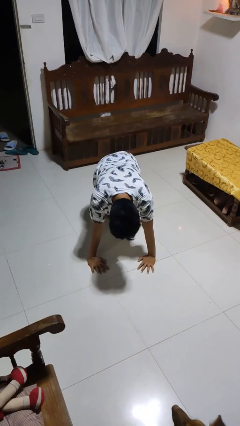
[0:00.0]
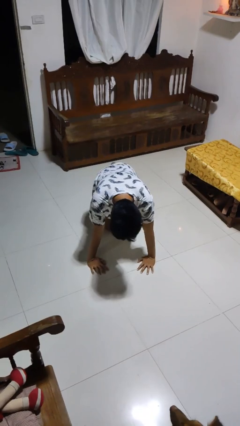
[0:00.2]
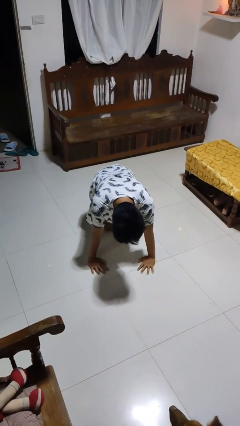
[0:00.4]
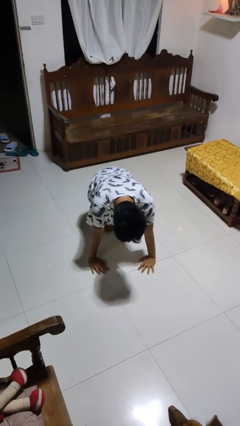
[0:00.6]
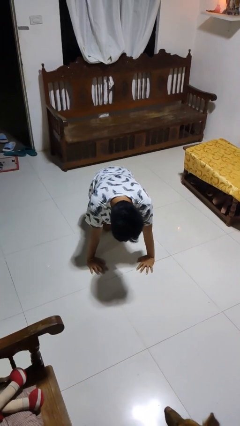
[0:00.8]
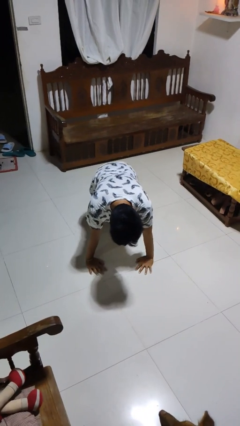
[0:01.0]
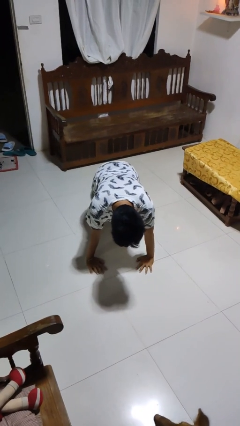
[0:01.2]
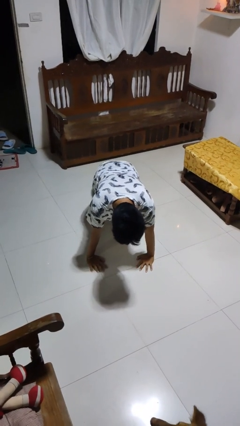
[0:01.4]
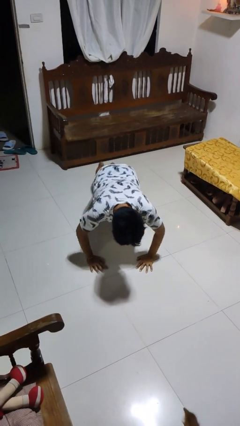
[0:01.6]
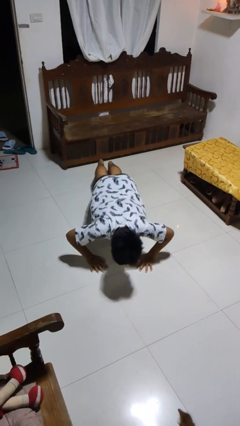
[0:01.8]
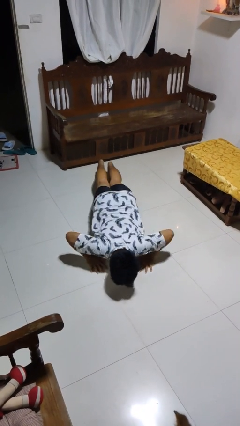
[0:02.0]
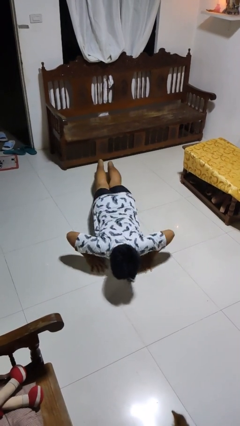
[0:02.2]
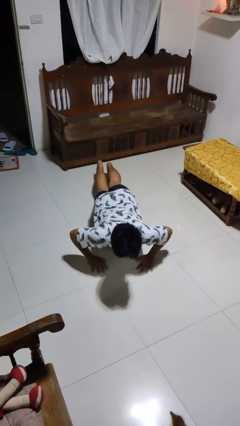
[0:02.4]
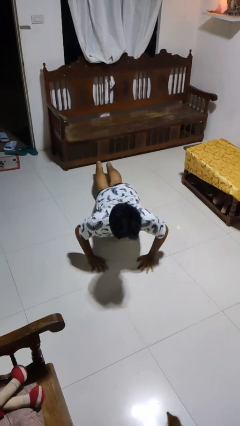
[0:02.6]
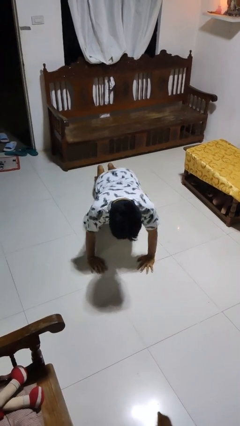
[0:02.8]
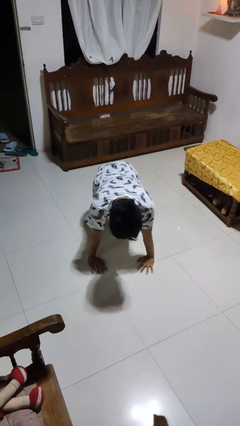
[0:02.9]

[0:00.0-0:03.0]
person exercises with pushup

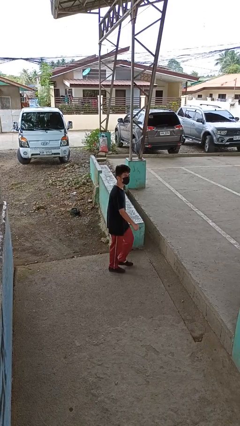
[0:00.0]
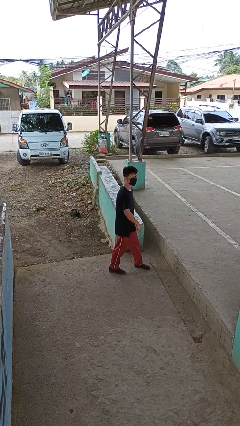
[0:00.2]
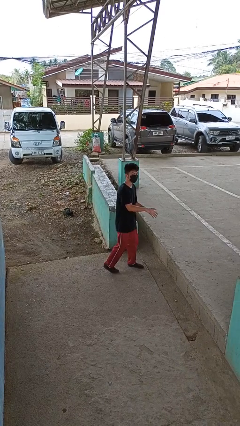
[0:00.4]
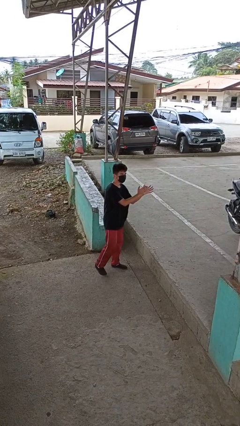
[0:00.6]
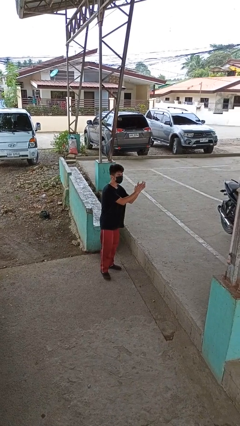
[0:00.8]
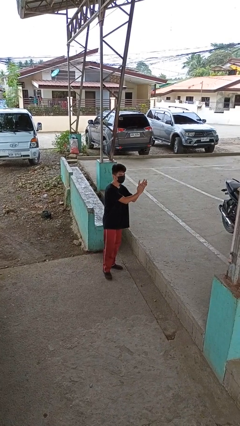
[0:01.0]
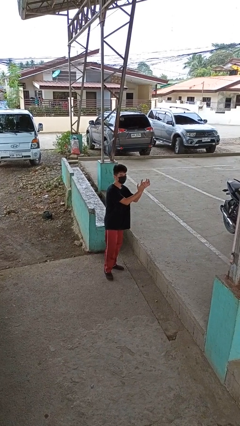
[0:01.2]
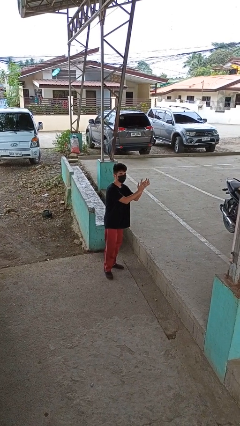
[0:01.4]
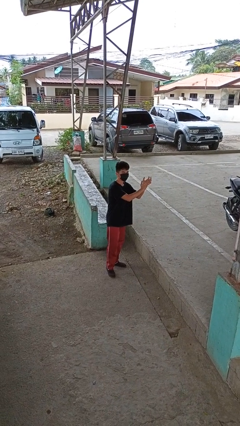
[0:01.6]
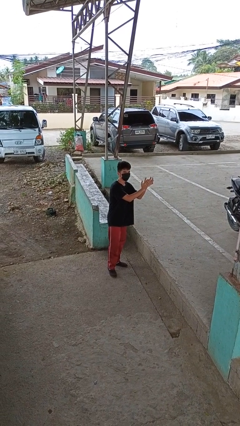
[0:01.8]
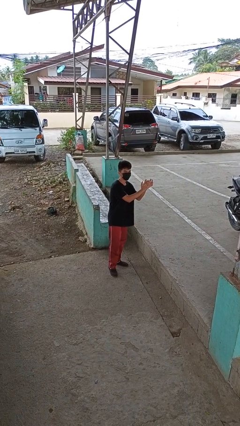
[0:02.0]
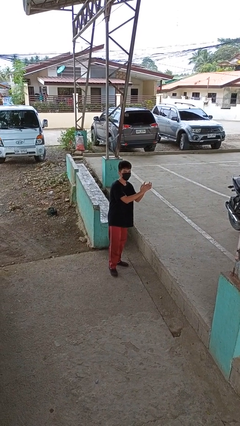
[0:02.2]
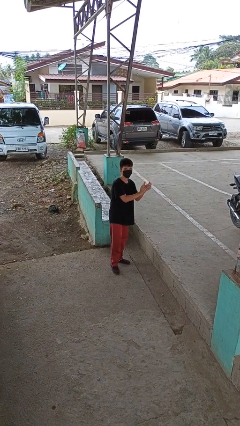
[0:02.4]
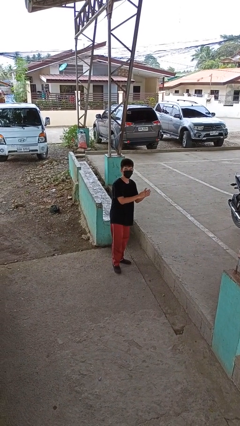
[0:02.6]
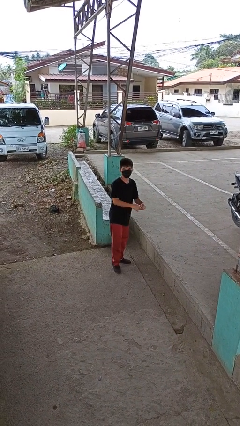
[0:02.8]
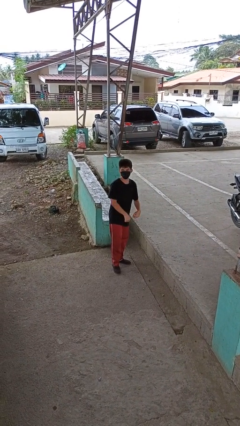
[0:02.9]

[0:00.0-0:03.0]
person claps hands

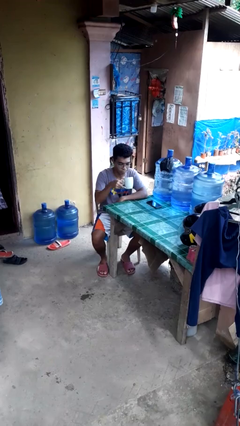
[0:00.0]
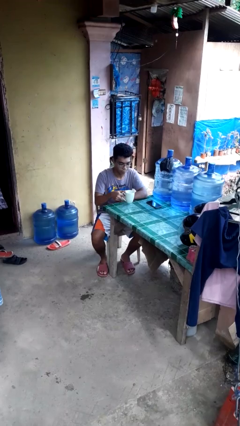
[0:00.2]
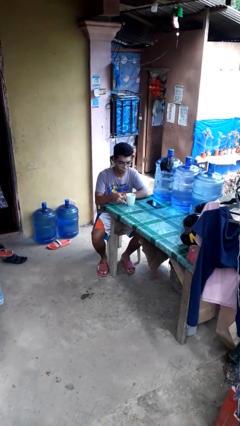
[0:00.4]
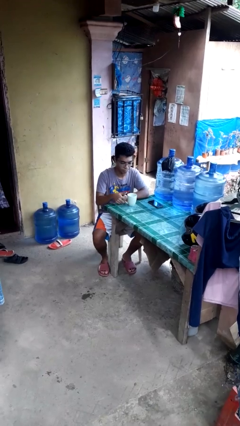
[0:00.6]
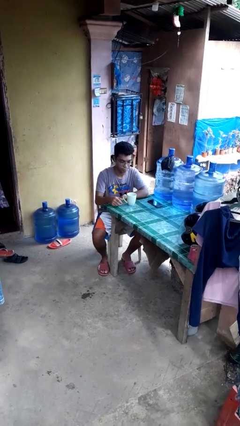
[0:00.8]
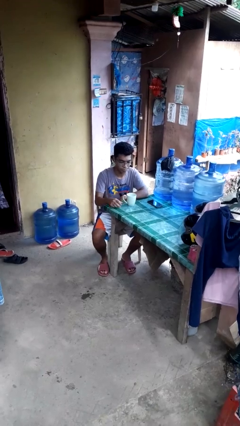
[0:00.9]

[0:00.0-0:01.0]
person puts down object on table

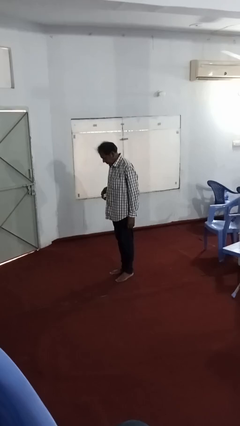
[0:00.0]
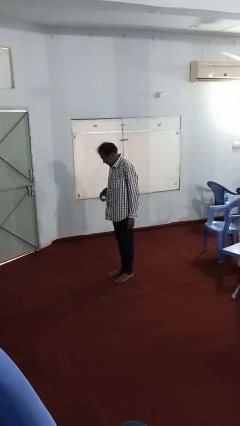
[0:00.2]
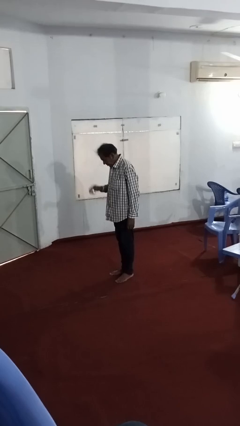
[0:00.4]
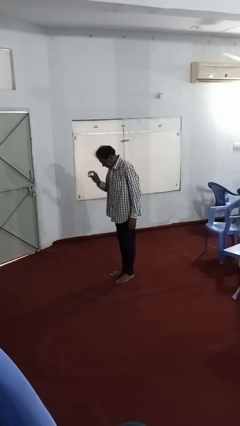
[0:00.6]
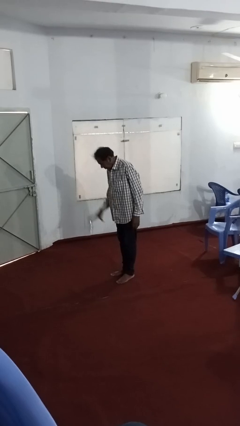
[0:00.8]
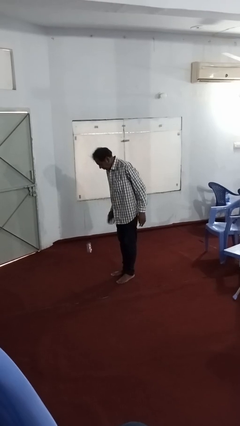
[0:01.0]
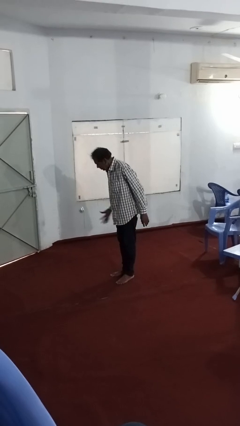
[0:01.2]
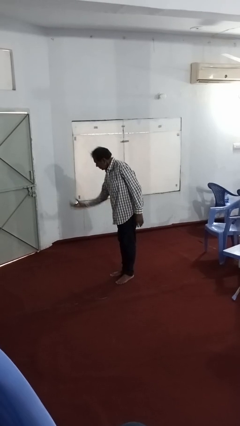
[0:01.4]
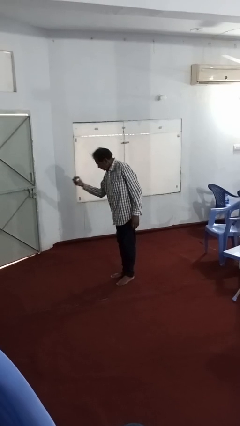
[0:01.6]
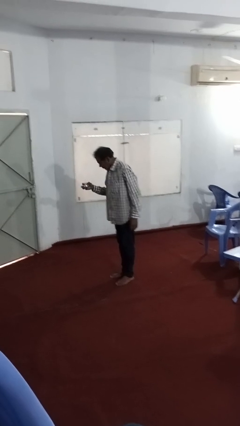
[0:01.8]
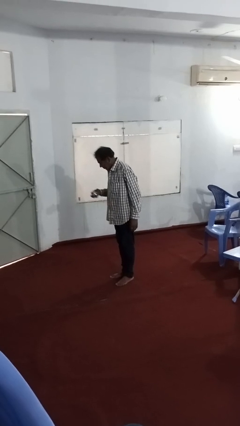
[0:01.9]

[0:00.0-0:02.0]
person bounces ball on floor

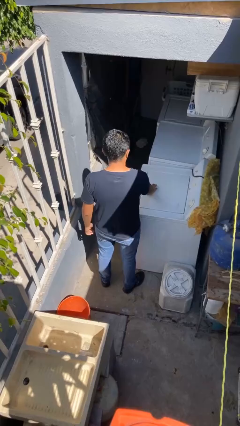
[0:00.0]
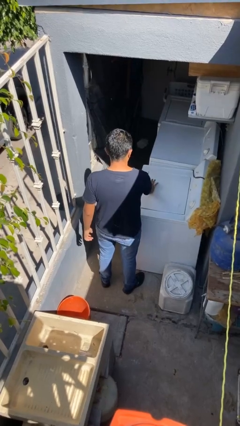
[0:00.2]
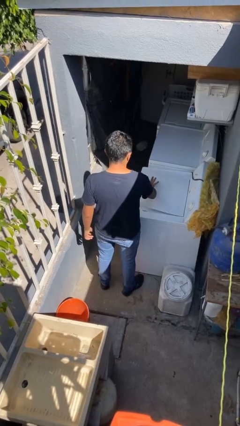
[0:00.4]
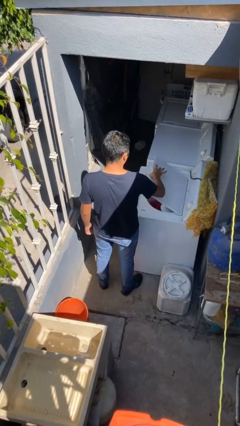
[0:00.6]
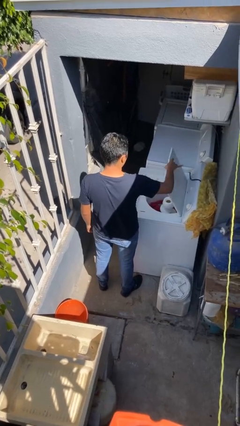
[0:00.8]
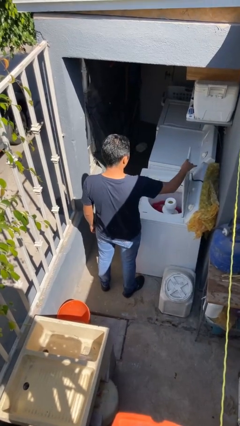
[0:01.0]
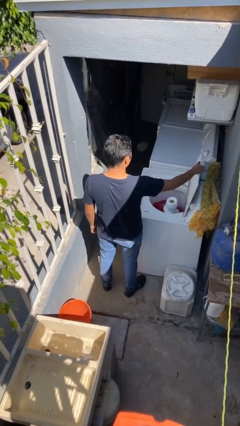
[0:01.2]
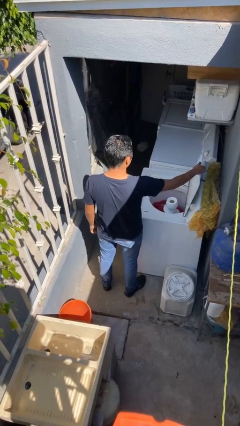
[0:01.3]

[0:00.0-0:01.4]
person opens clothes washer

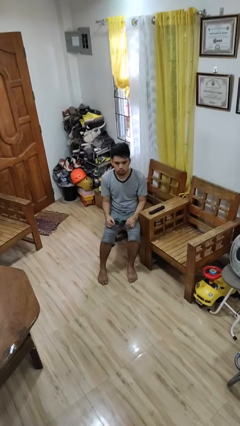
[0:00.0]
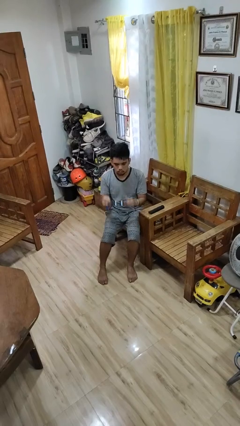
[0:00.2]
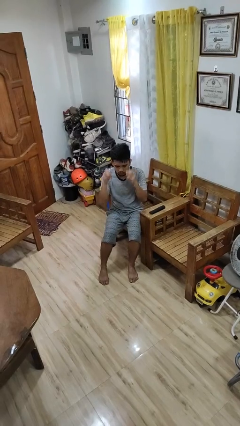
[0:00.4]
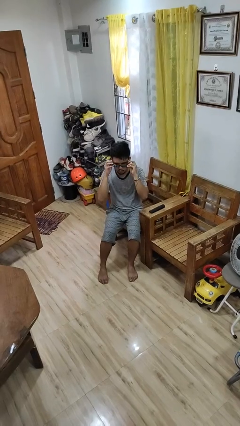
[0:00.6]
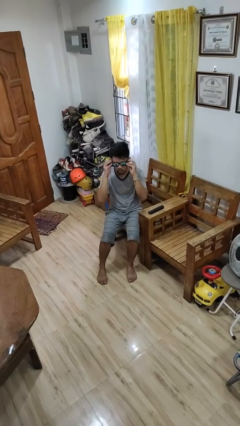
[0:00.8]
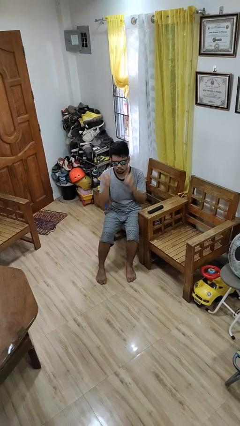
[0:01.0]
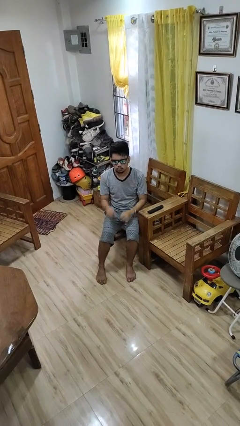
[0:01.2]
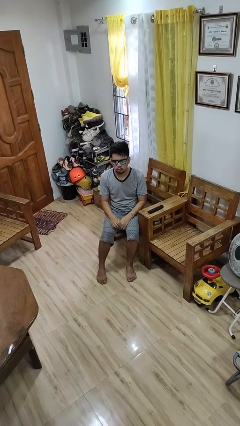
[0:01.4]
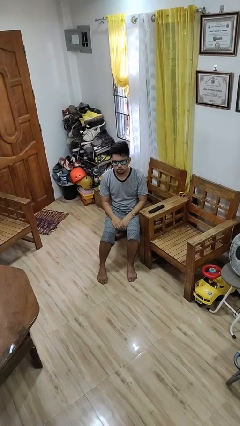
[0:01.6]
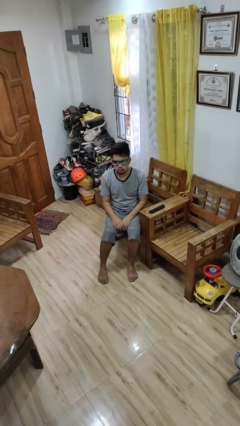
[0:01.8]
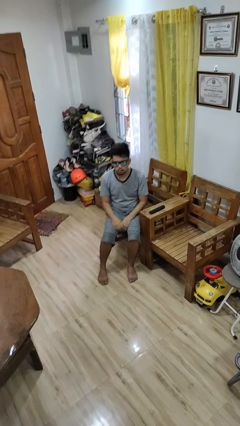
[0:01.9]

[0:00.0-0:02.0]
person puts on sunglasses

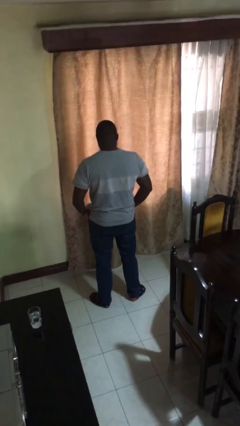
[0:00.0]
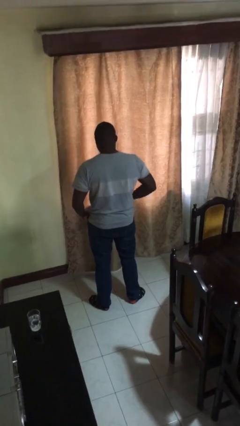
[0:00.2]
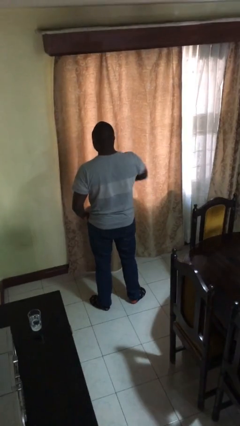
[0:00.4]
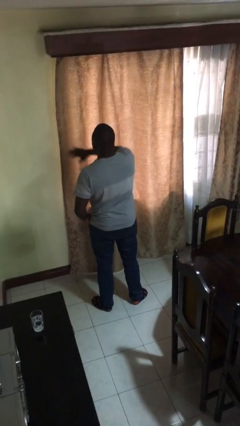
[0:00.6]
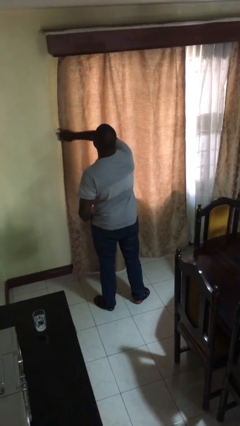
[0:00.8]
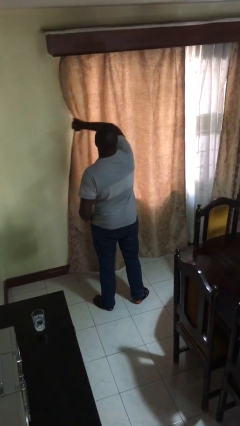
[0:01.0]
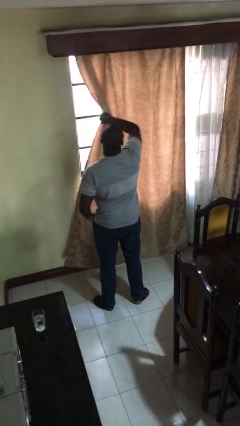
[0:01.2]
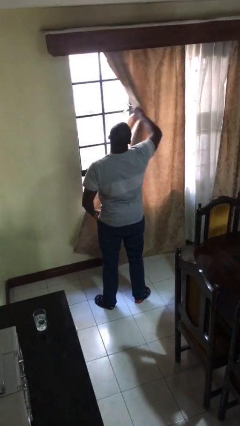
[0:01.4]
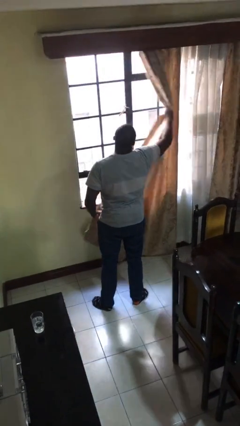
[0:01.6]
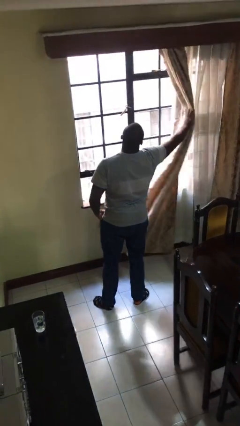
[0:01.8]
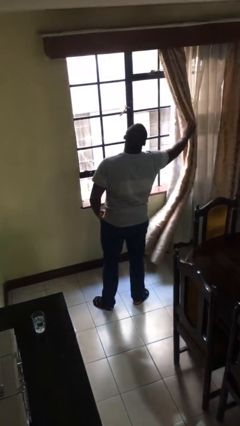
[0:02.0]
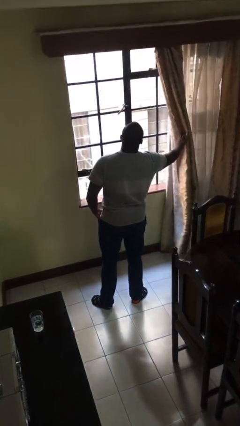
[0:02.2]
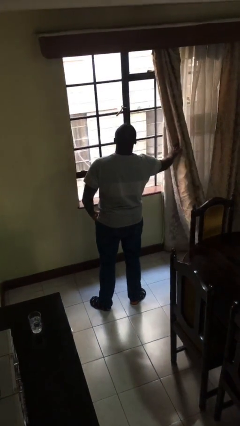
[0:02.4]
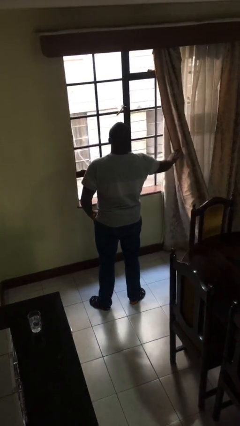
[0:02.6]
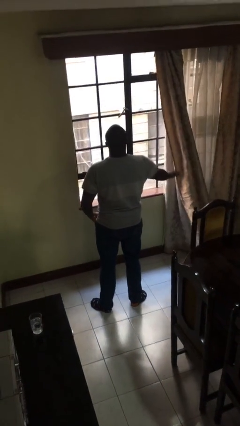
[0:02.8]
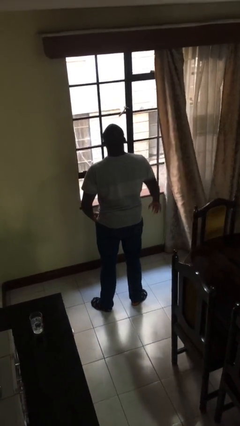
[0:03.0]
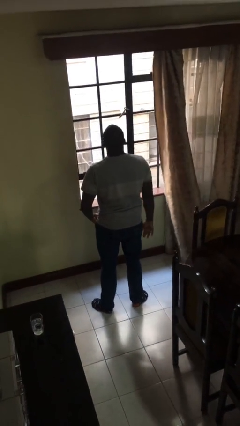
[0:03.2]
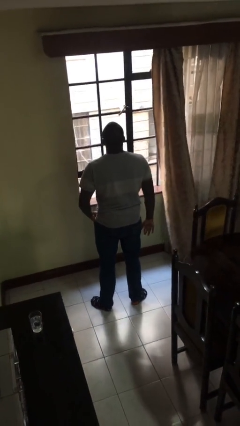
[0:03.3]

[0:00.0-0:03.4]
person opens curtains

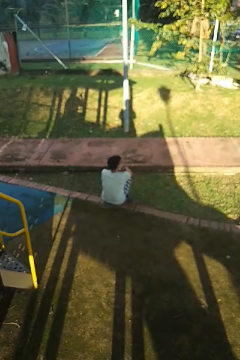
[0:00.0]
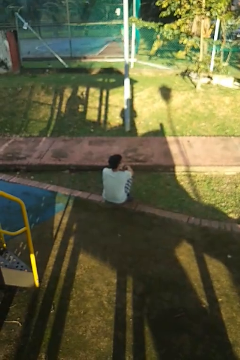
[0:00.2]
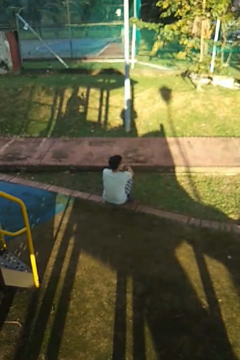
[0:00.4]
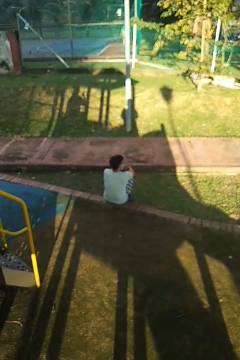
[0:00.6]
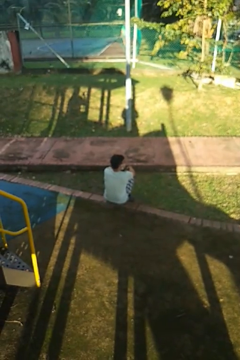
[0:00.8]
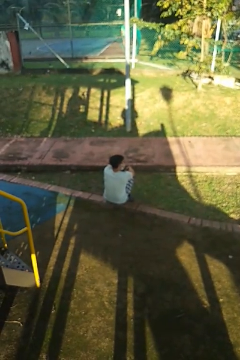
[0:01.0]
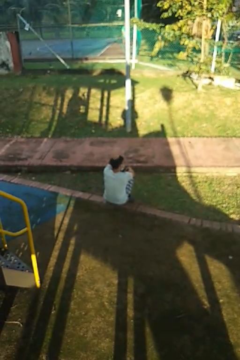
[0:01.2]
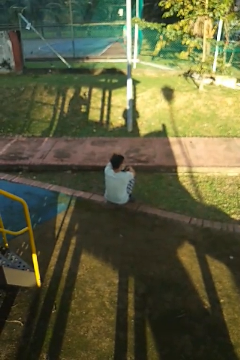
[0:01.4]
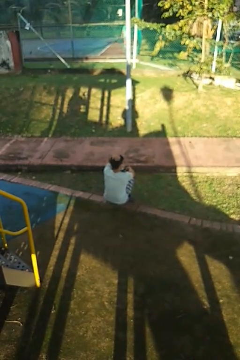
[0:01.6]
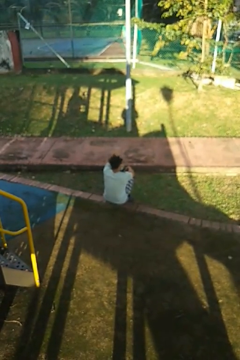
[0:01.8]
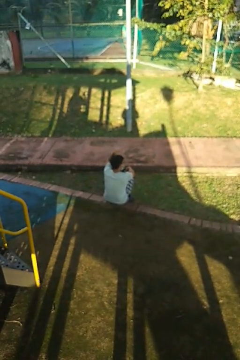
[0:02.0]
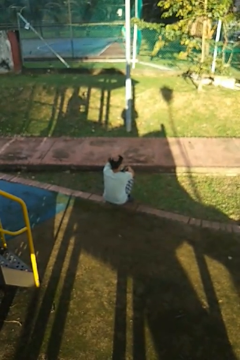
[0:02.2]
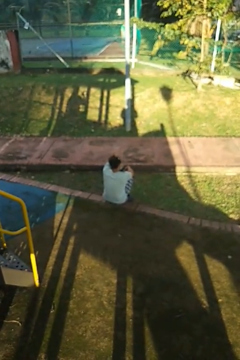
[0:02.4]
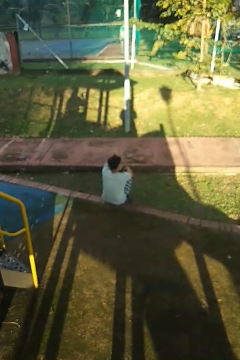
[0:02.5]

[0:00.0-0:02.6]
person pats head
